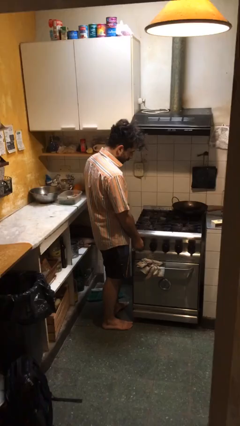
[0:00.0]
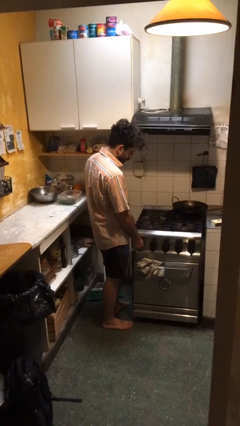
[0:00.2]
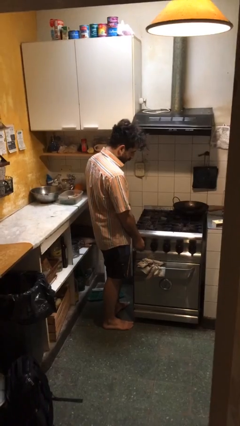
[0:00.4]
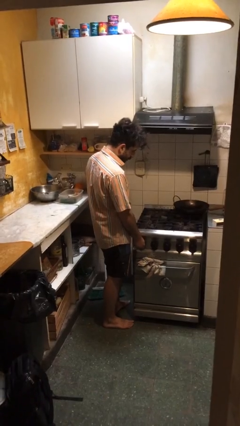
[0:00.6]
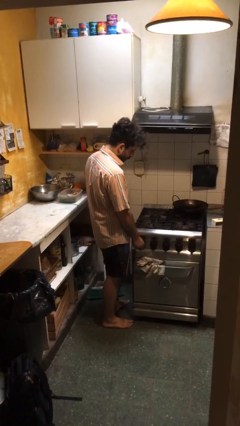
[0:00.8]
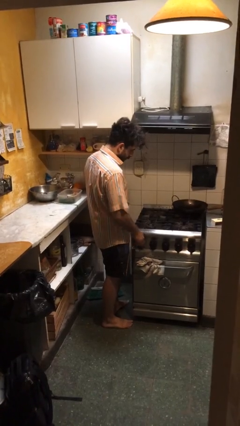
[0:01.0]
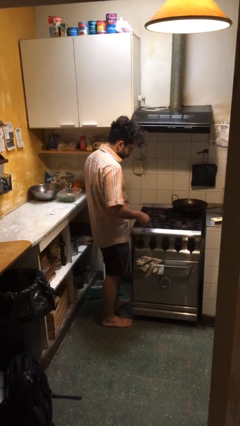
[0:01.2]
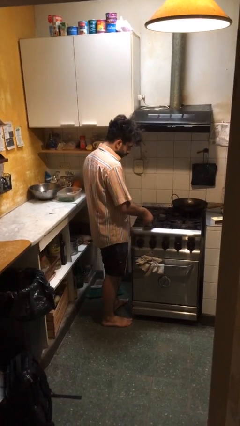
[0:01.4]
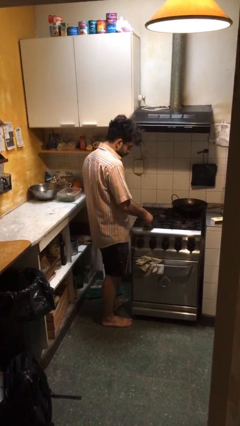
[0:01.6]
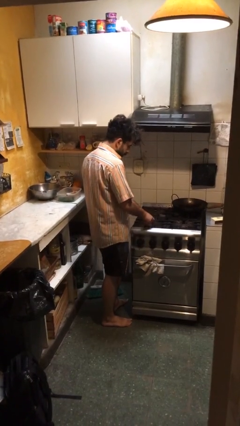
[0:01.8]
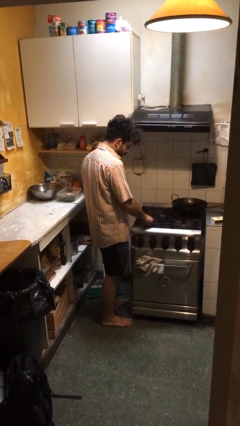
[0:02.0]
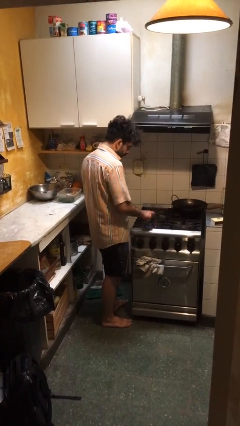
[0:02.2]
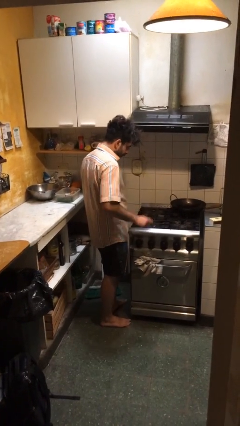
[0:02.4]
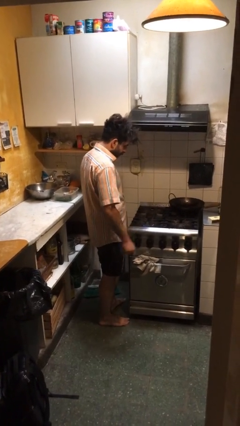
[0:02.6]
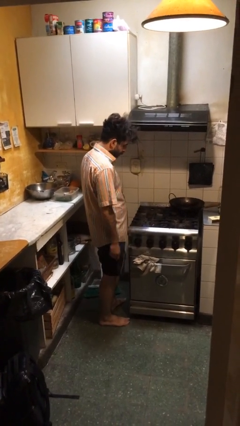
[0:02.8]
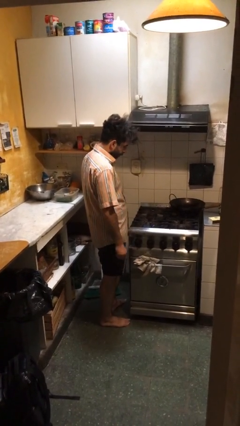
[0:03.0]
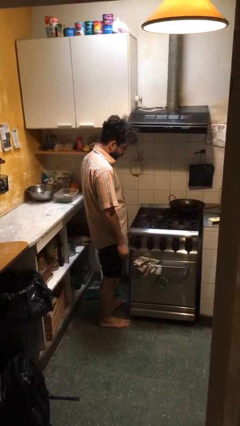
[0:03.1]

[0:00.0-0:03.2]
person turns on stovetop

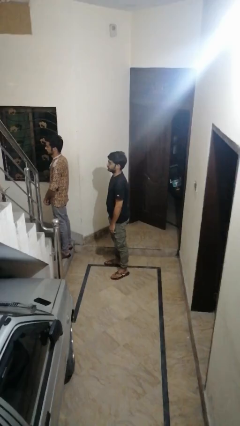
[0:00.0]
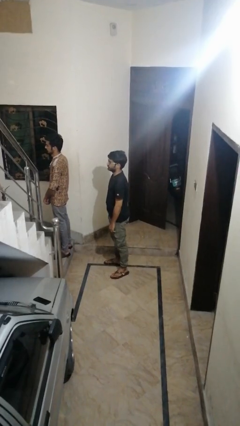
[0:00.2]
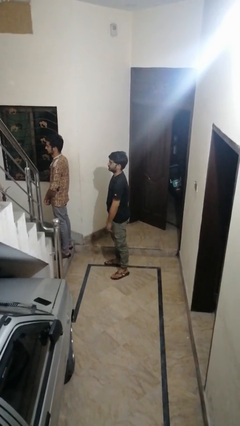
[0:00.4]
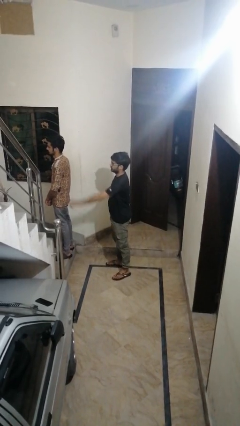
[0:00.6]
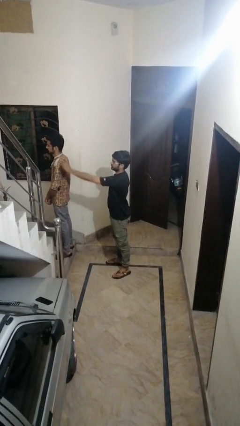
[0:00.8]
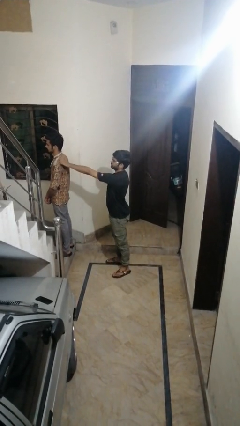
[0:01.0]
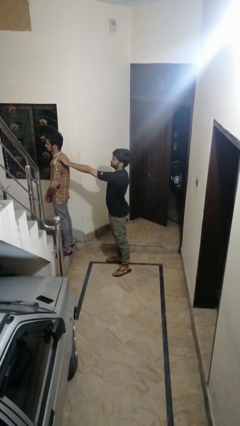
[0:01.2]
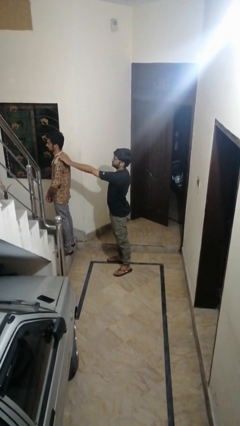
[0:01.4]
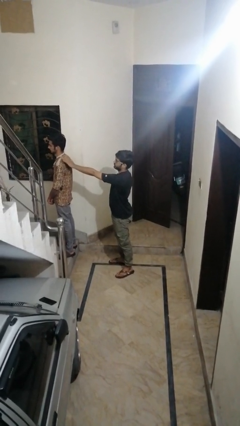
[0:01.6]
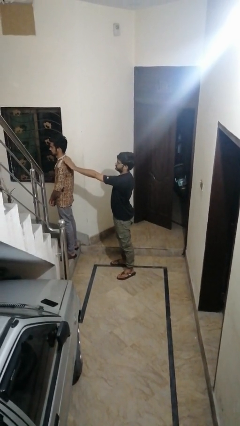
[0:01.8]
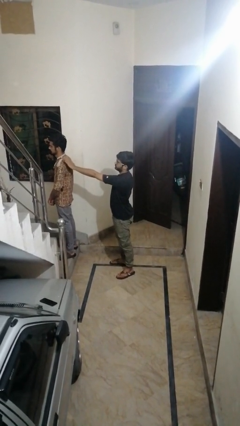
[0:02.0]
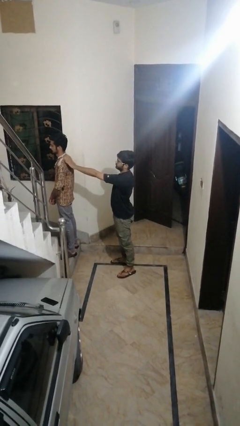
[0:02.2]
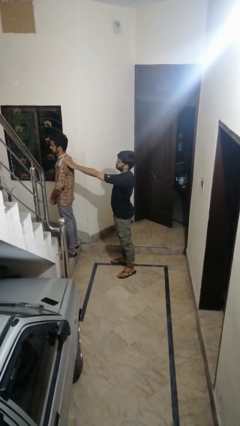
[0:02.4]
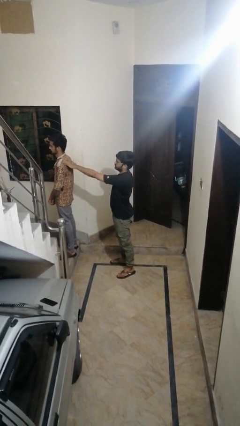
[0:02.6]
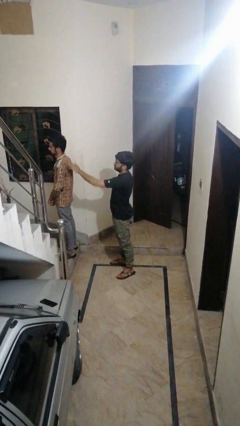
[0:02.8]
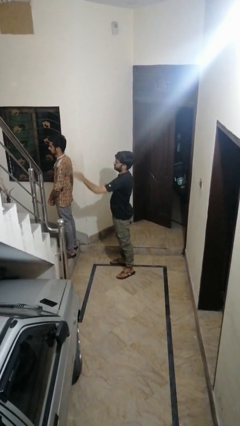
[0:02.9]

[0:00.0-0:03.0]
person touches back of person

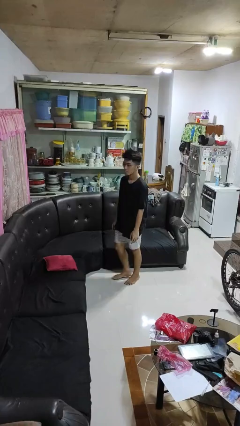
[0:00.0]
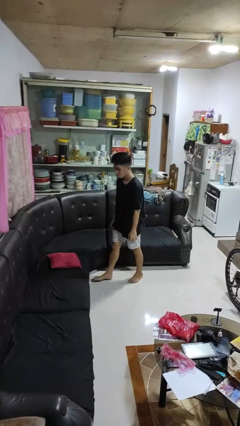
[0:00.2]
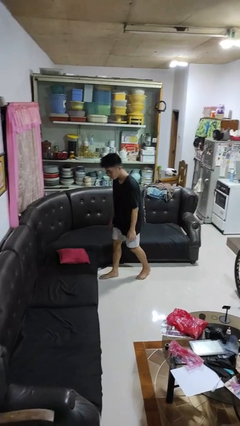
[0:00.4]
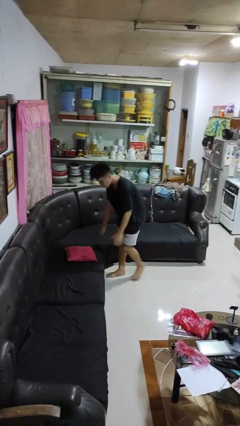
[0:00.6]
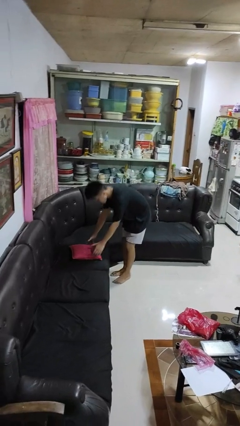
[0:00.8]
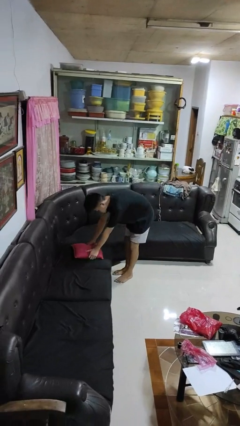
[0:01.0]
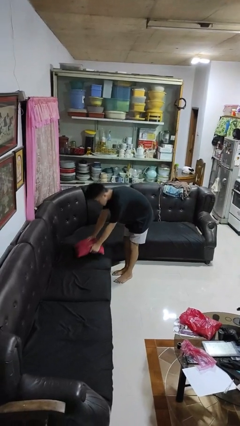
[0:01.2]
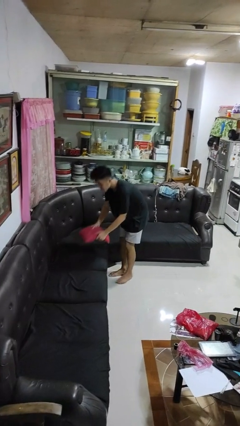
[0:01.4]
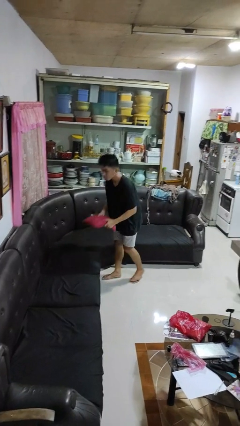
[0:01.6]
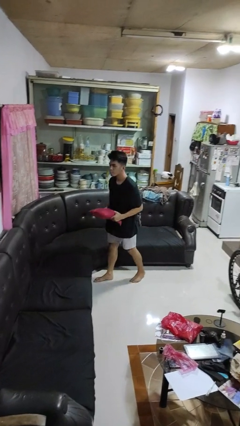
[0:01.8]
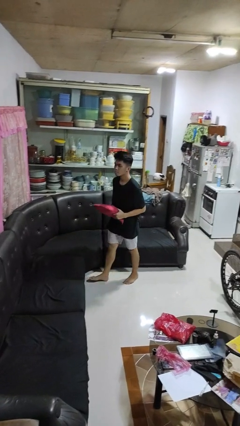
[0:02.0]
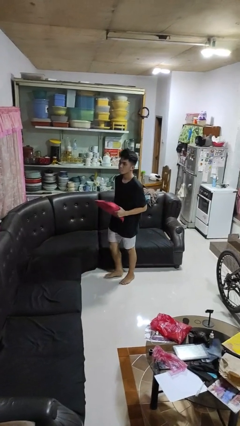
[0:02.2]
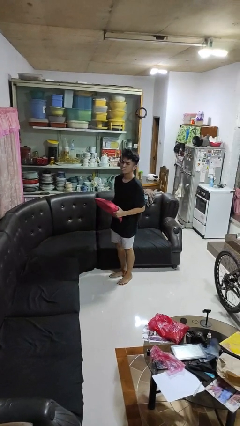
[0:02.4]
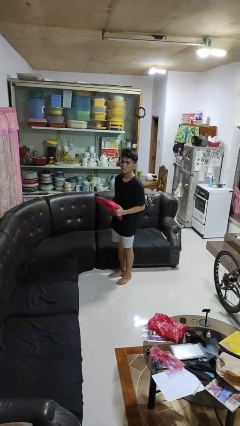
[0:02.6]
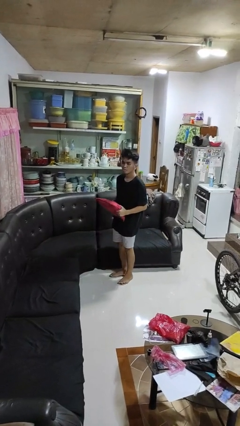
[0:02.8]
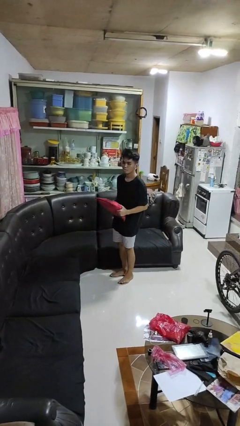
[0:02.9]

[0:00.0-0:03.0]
person picks up object from couch

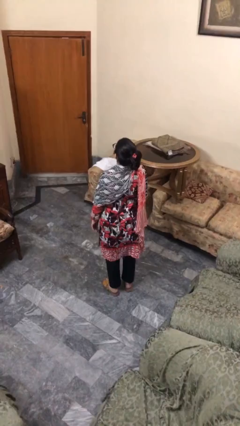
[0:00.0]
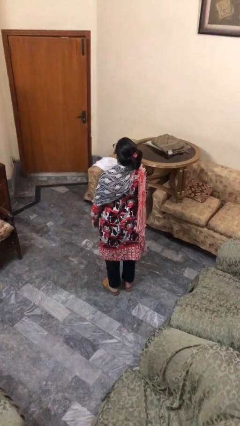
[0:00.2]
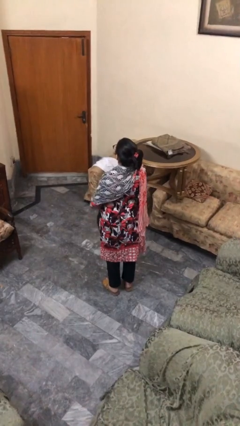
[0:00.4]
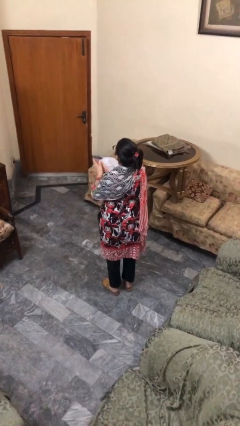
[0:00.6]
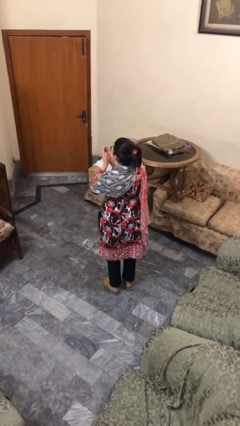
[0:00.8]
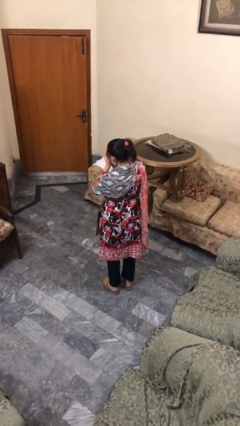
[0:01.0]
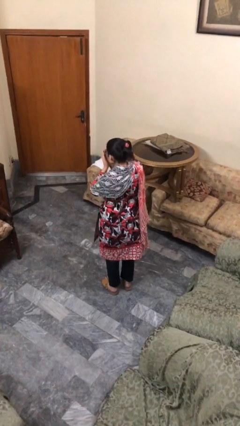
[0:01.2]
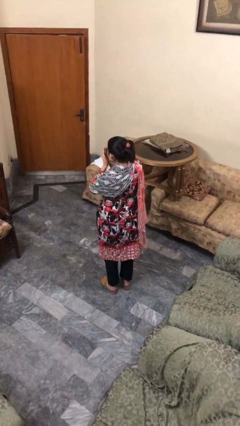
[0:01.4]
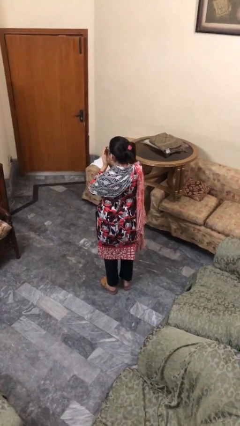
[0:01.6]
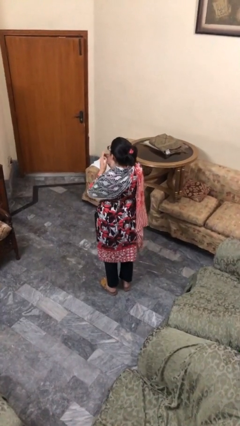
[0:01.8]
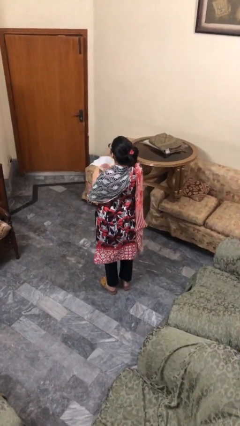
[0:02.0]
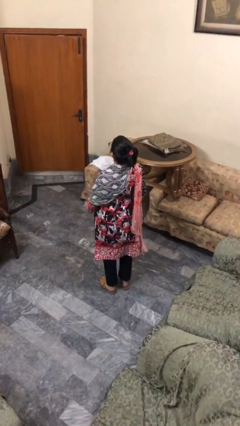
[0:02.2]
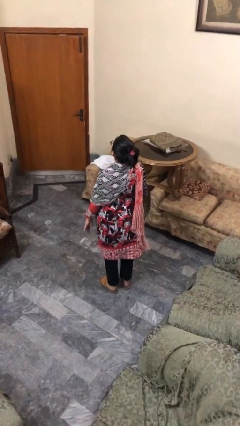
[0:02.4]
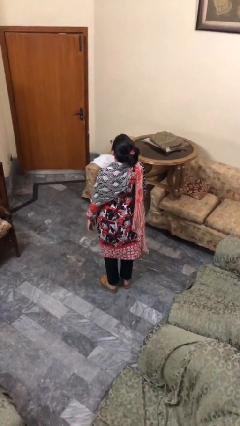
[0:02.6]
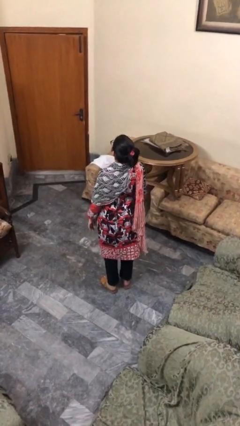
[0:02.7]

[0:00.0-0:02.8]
person sneezes into hand

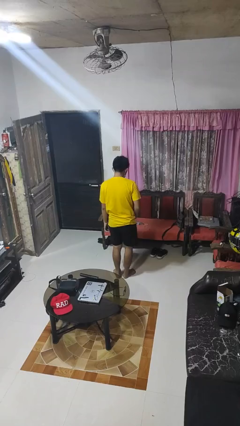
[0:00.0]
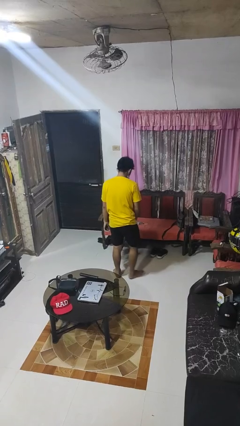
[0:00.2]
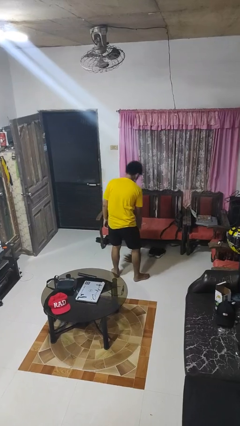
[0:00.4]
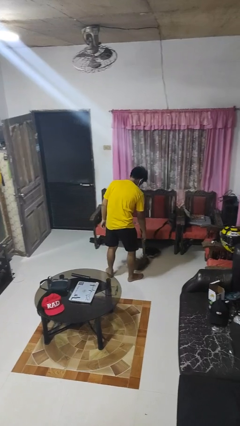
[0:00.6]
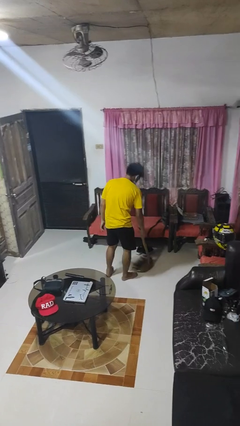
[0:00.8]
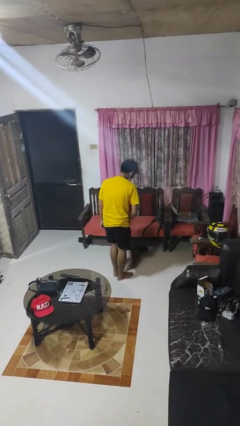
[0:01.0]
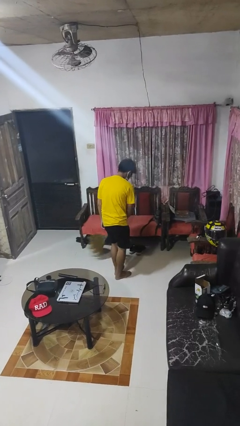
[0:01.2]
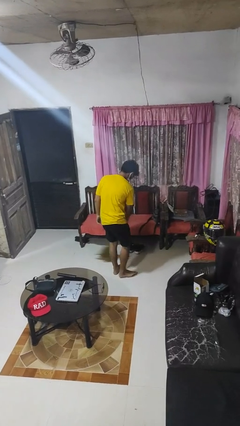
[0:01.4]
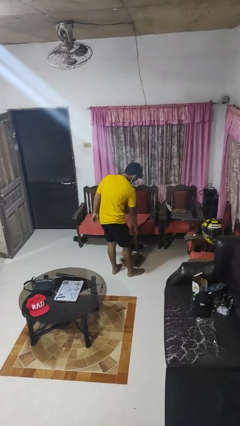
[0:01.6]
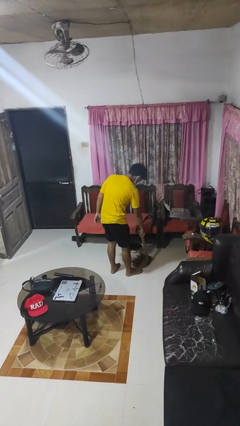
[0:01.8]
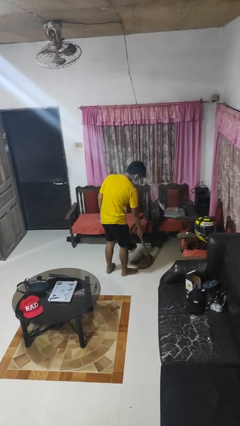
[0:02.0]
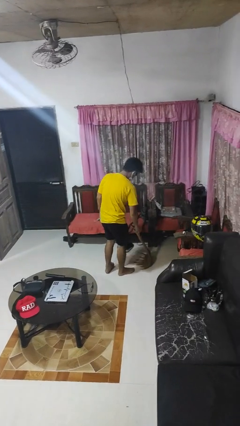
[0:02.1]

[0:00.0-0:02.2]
person sweeps floor

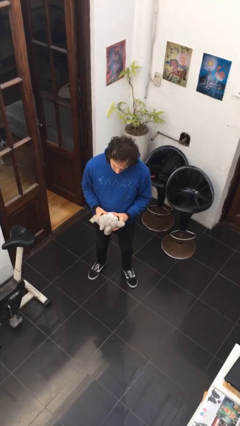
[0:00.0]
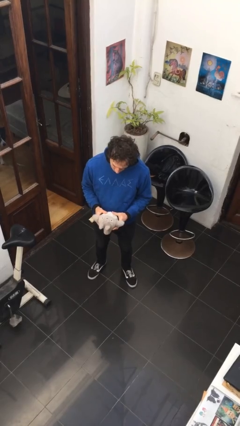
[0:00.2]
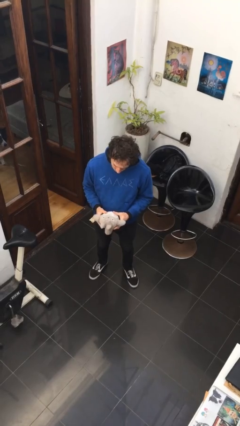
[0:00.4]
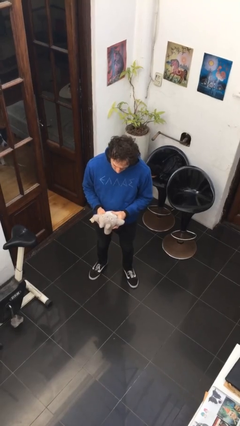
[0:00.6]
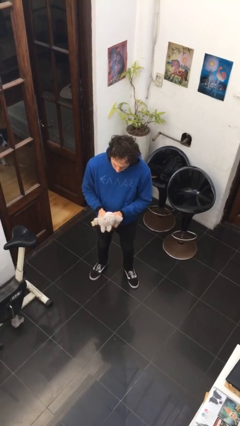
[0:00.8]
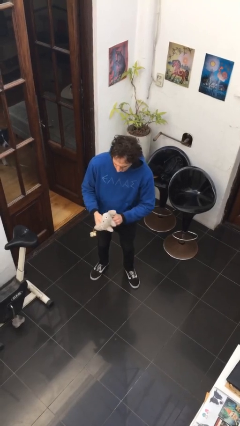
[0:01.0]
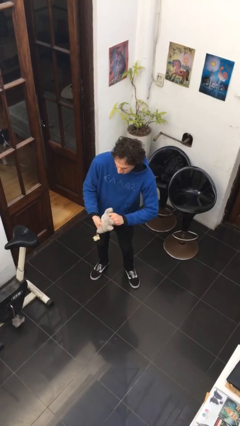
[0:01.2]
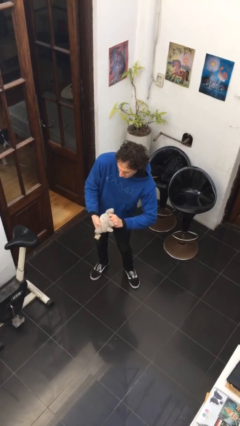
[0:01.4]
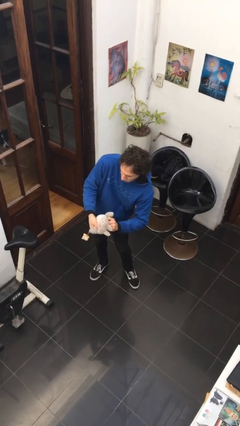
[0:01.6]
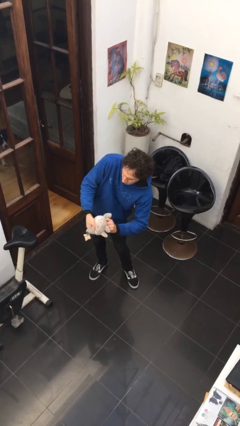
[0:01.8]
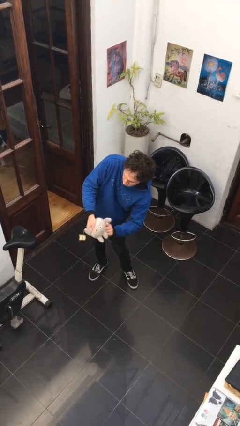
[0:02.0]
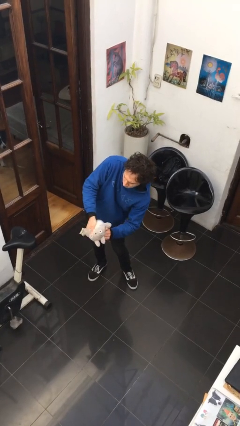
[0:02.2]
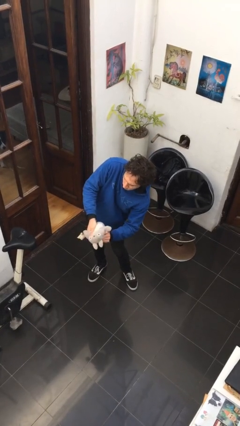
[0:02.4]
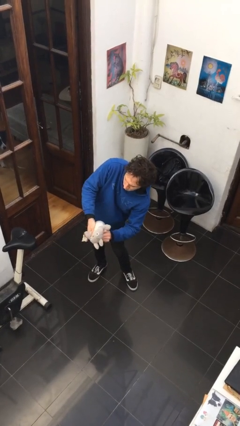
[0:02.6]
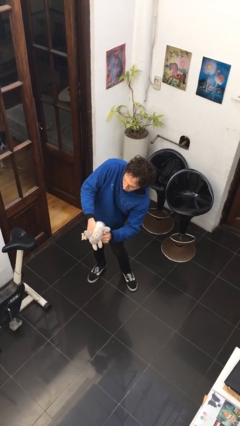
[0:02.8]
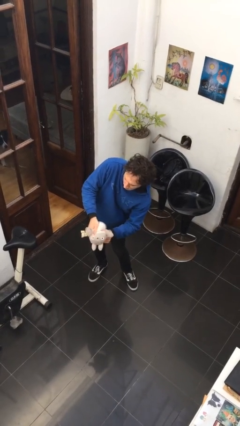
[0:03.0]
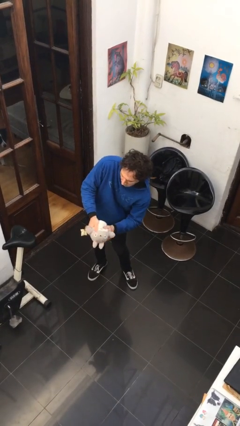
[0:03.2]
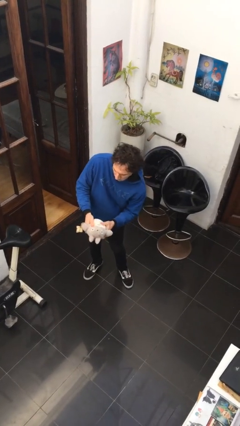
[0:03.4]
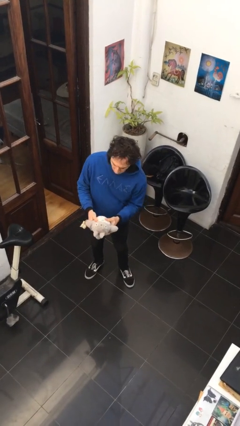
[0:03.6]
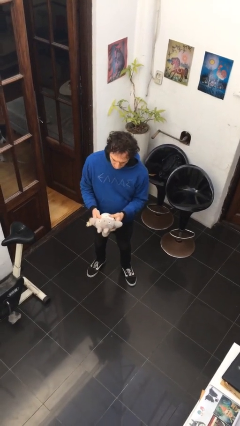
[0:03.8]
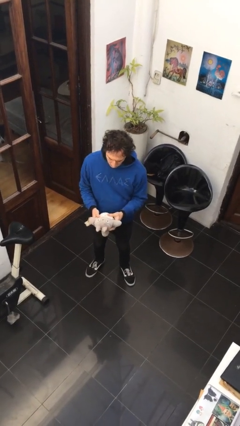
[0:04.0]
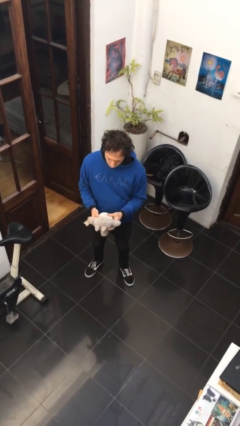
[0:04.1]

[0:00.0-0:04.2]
person squeezes object
